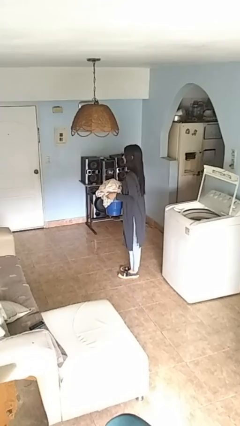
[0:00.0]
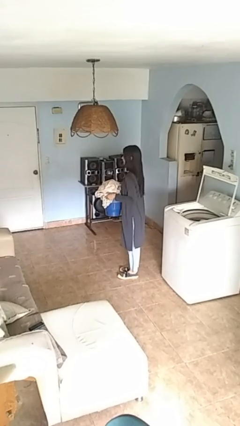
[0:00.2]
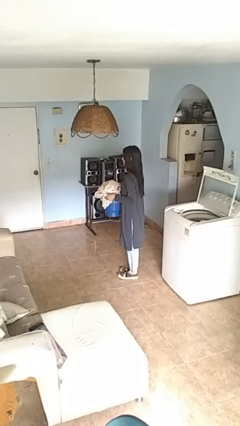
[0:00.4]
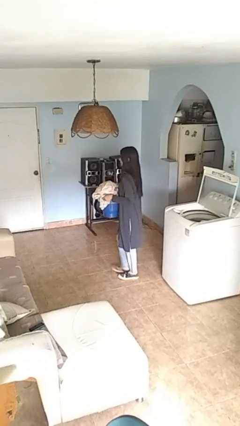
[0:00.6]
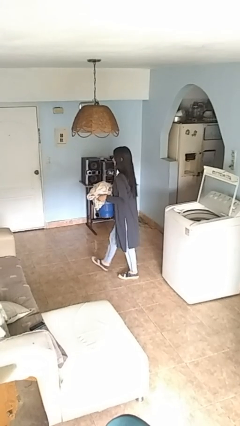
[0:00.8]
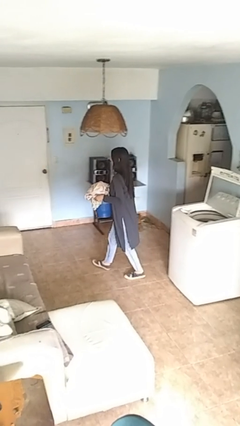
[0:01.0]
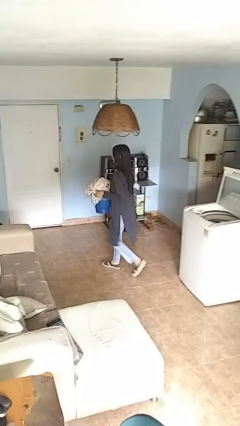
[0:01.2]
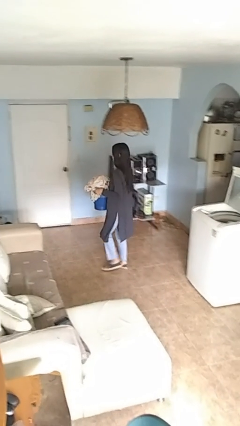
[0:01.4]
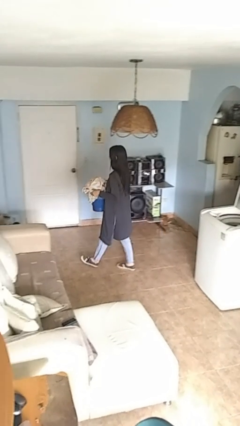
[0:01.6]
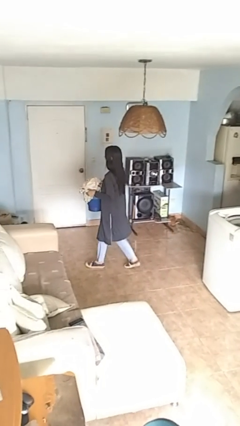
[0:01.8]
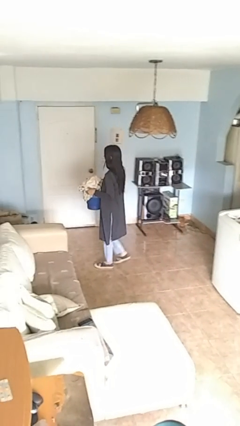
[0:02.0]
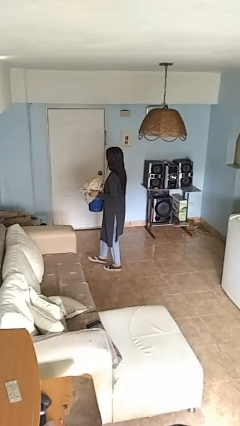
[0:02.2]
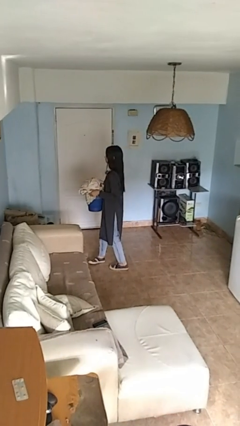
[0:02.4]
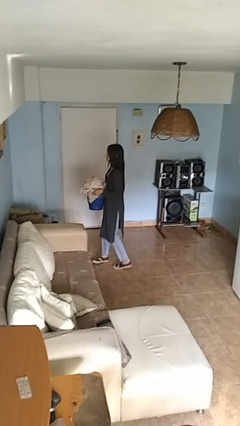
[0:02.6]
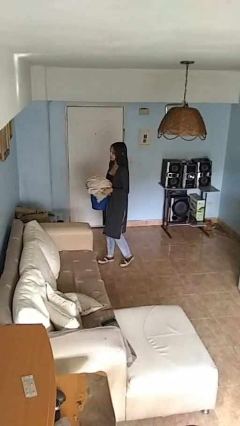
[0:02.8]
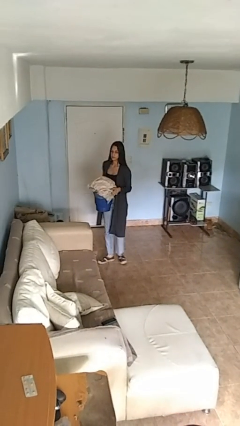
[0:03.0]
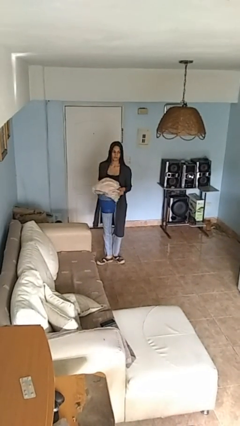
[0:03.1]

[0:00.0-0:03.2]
person carries laundry basket

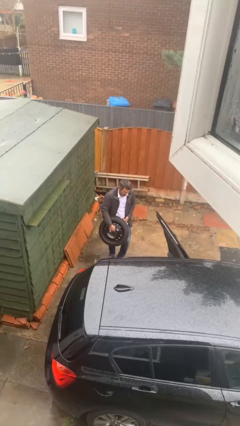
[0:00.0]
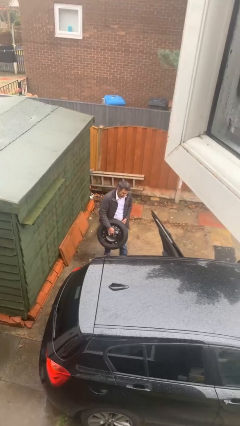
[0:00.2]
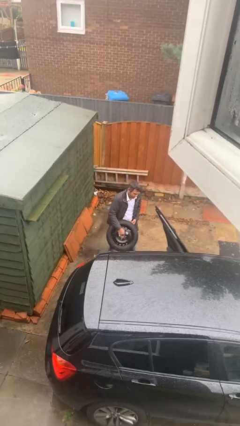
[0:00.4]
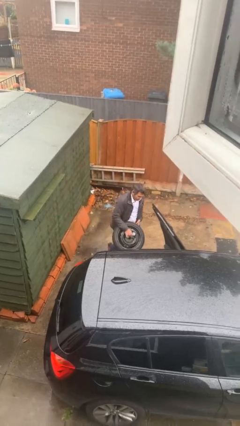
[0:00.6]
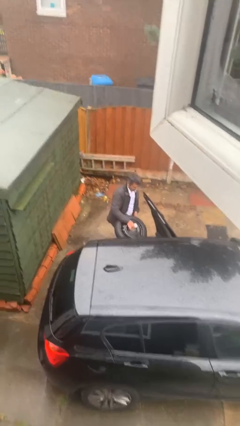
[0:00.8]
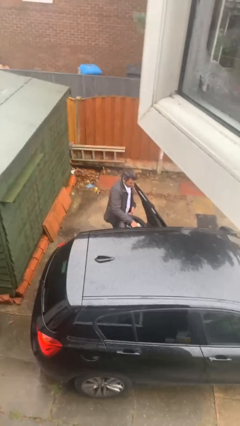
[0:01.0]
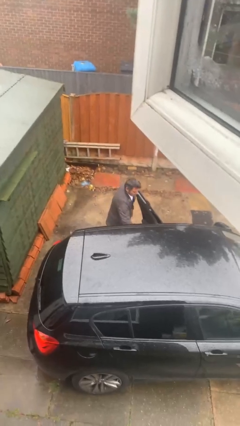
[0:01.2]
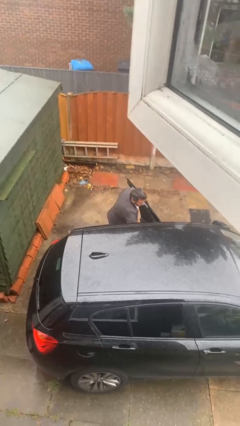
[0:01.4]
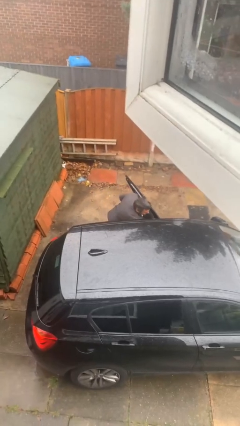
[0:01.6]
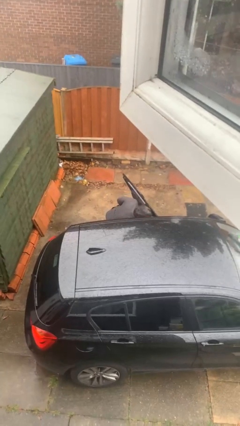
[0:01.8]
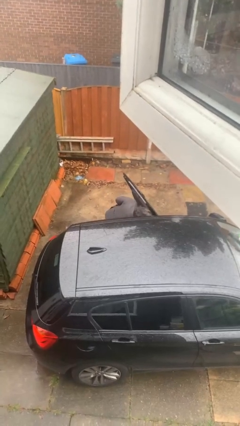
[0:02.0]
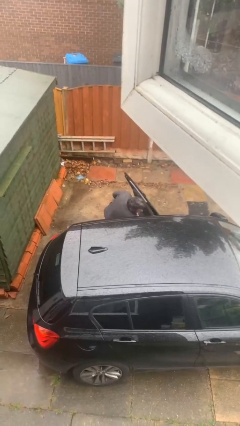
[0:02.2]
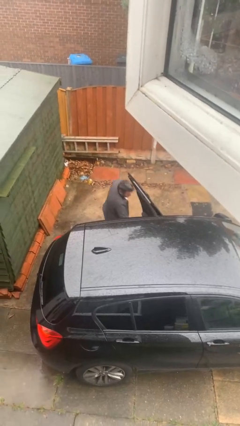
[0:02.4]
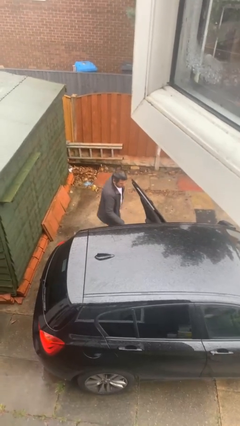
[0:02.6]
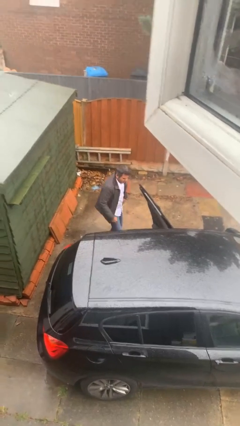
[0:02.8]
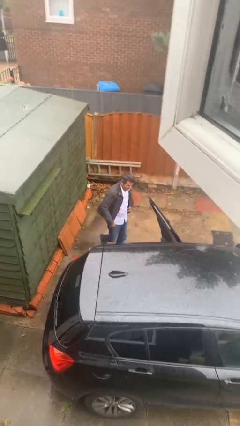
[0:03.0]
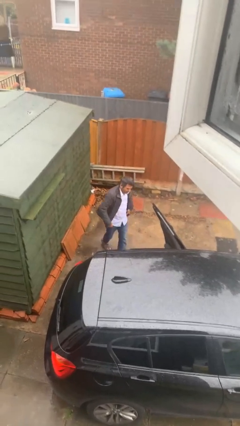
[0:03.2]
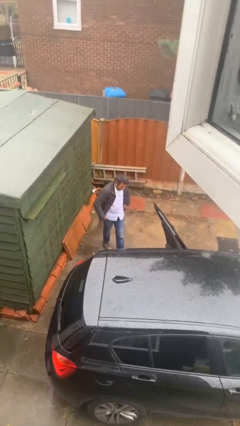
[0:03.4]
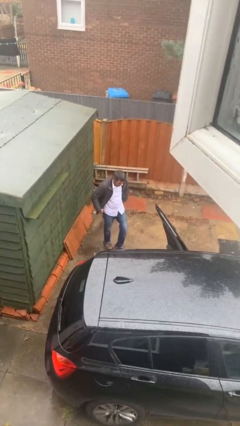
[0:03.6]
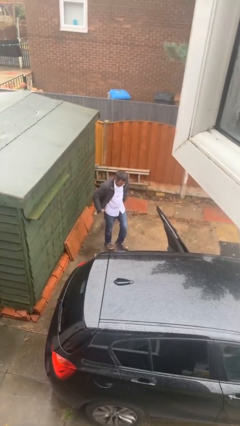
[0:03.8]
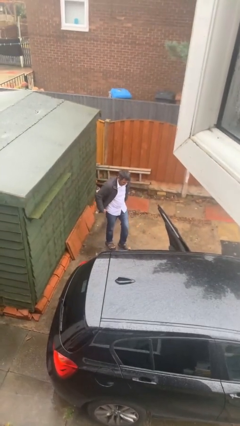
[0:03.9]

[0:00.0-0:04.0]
person loads car

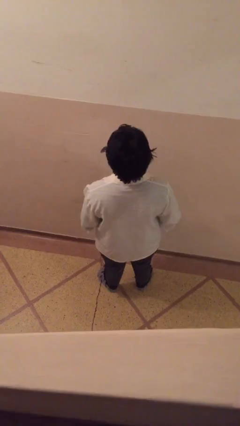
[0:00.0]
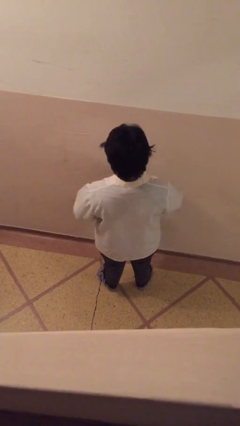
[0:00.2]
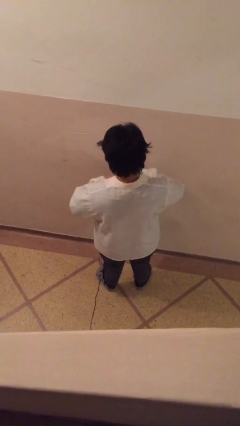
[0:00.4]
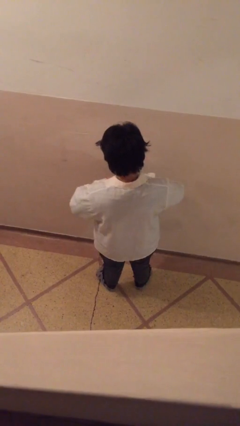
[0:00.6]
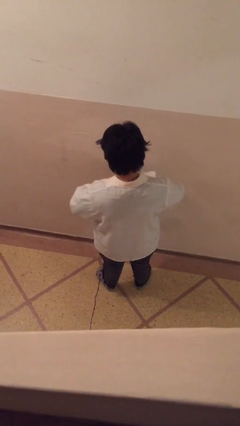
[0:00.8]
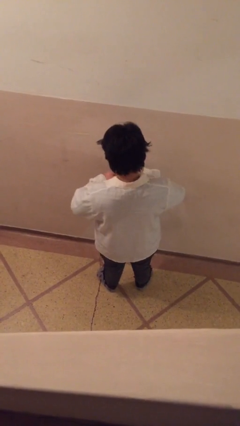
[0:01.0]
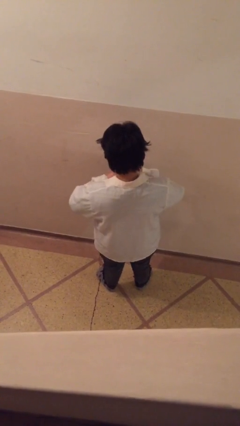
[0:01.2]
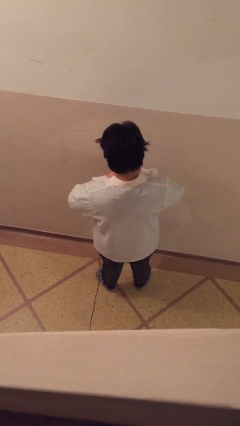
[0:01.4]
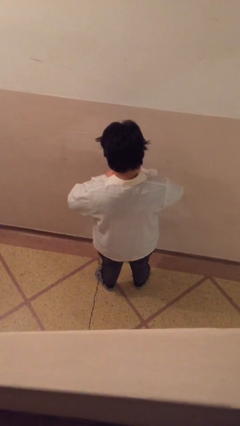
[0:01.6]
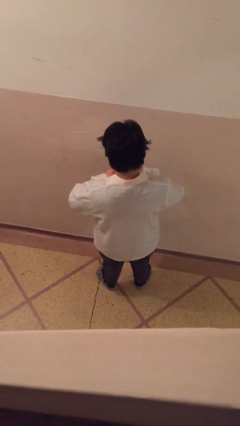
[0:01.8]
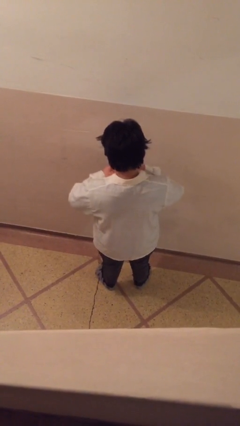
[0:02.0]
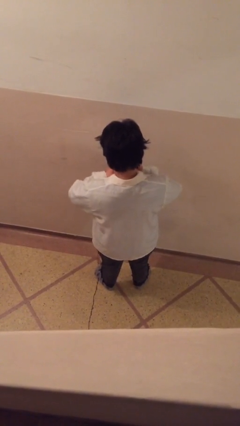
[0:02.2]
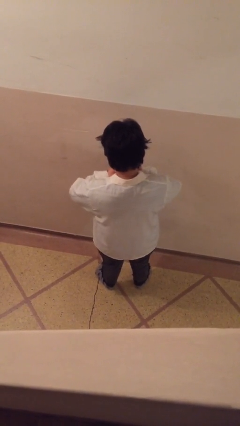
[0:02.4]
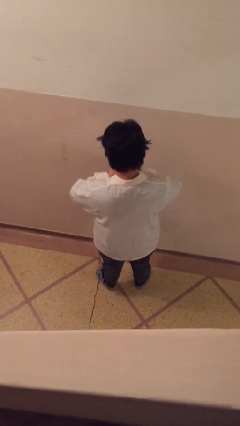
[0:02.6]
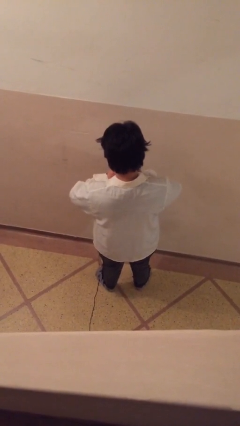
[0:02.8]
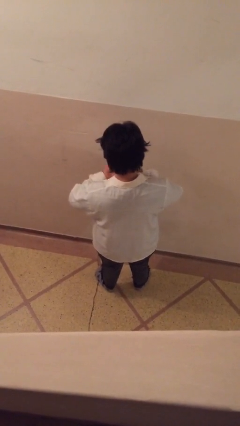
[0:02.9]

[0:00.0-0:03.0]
person buttons shirt

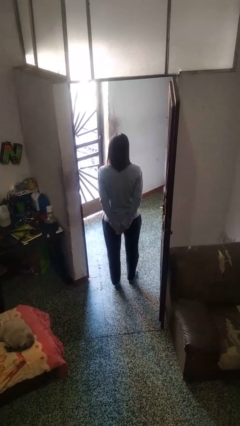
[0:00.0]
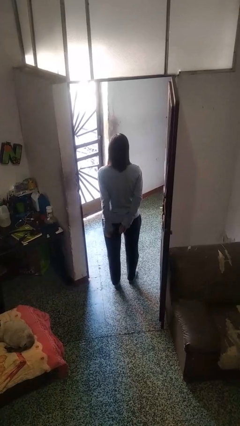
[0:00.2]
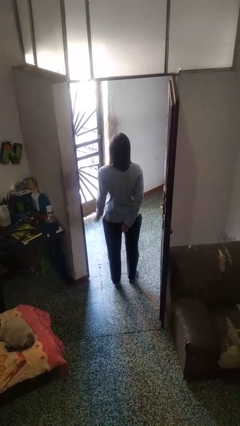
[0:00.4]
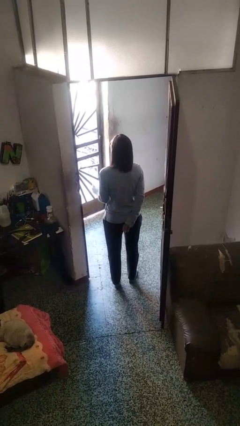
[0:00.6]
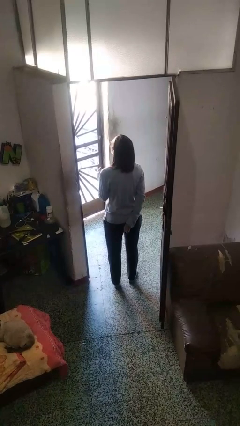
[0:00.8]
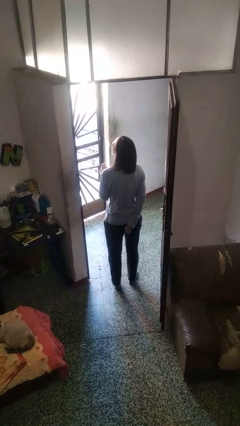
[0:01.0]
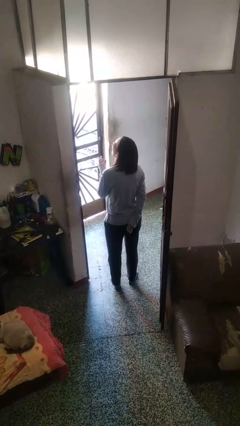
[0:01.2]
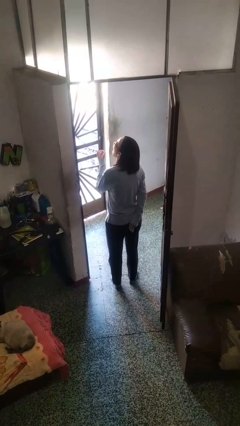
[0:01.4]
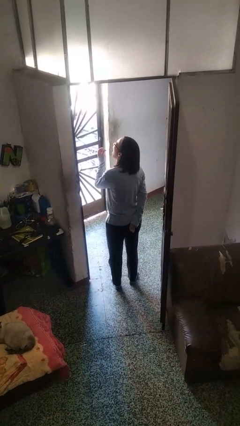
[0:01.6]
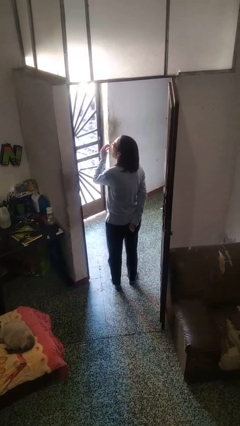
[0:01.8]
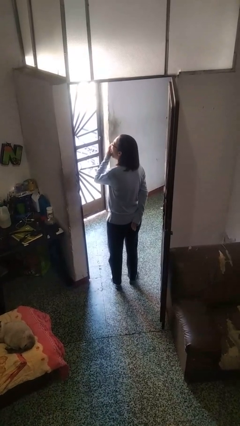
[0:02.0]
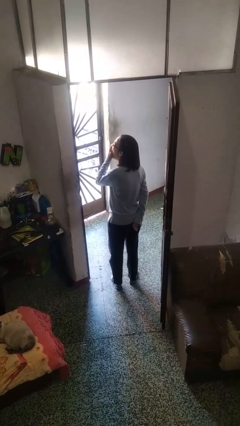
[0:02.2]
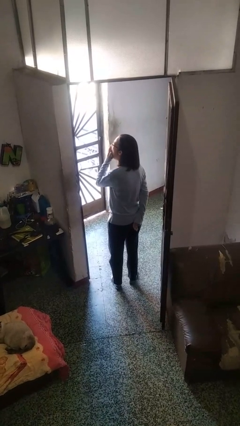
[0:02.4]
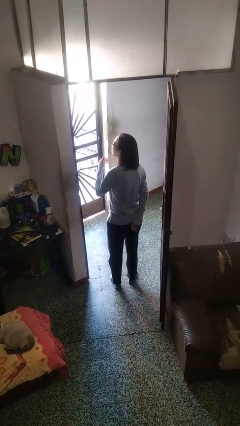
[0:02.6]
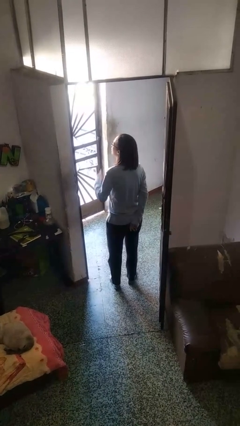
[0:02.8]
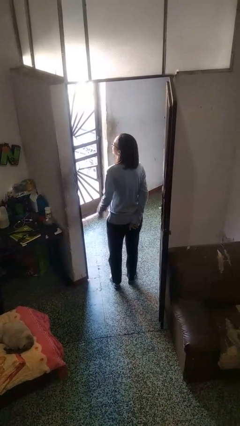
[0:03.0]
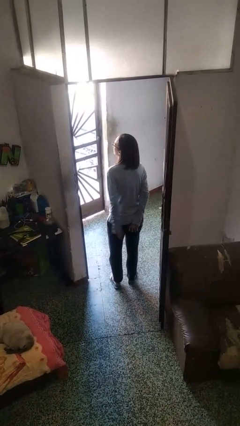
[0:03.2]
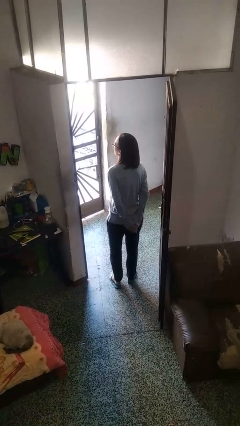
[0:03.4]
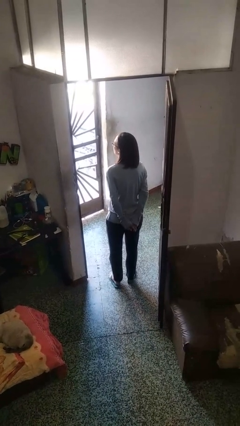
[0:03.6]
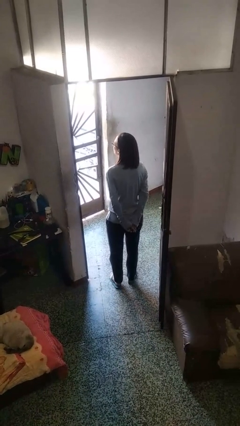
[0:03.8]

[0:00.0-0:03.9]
person yawns

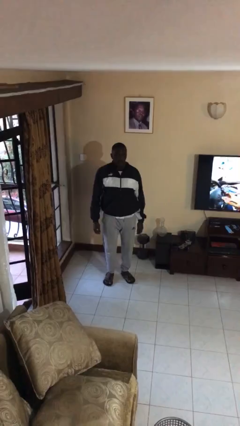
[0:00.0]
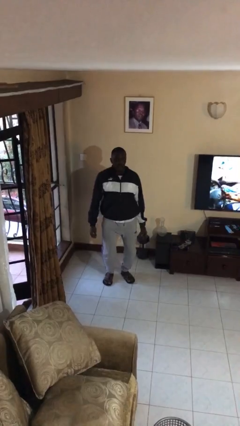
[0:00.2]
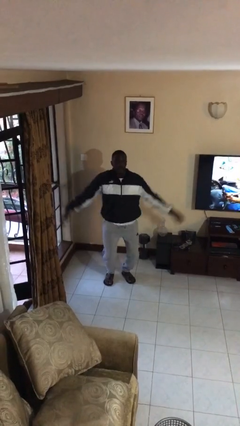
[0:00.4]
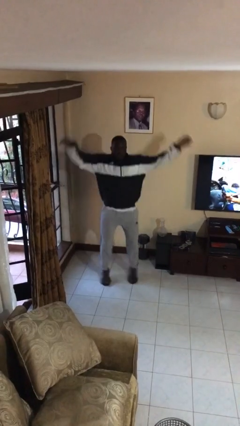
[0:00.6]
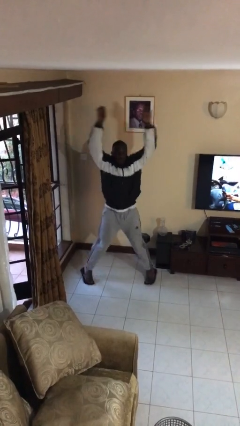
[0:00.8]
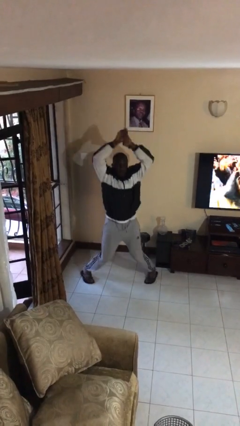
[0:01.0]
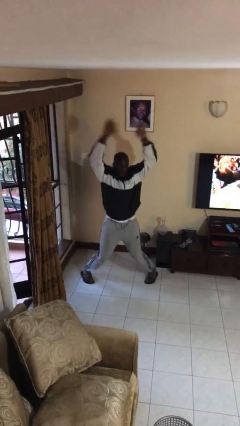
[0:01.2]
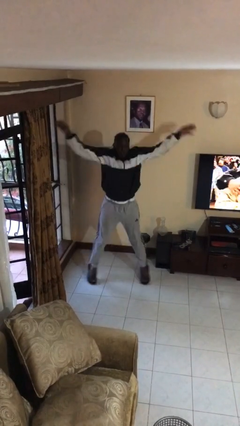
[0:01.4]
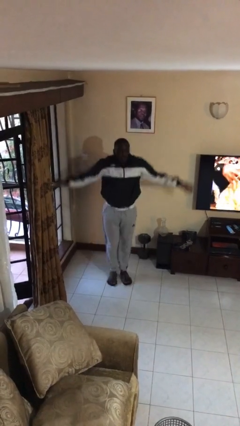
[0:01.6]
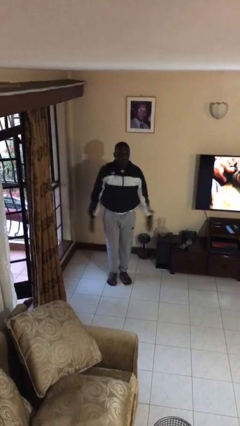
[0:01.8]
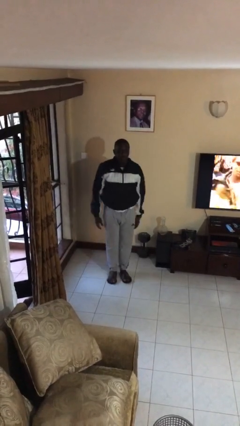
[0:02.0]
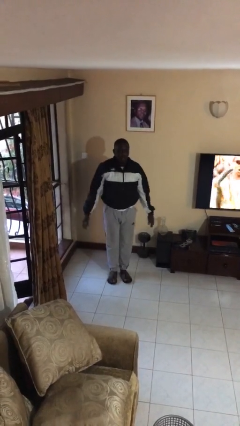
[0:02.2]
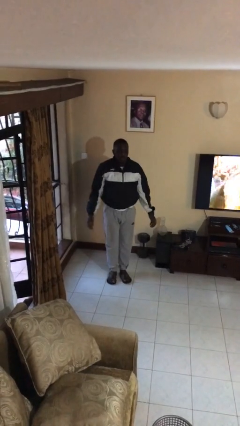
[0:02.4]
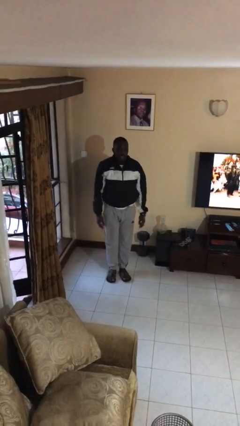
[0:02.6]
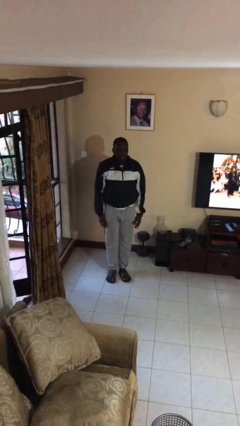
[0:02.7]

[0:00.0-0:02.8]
person exercises with jumping jacks

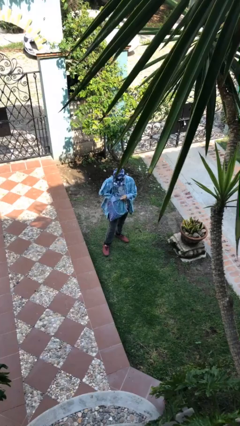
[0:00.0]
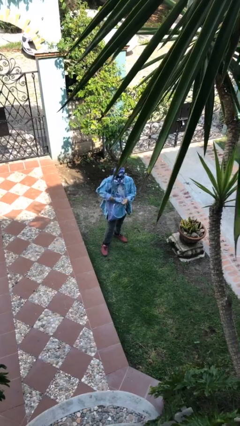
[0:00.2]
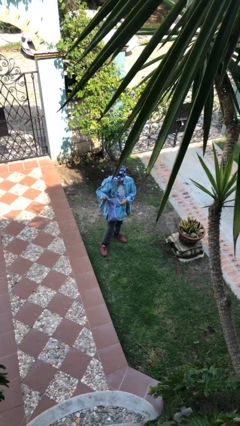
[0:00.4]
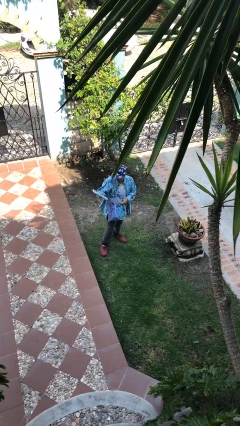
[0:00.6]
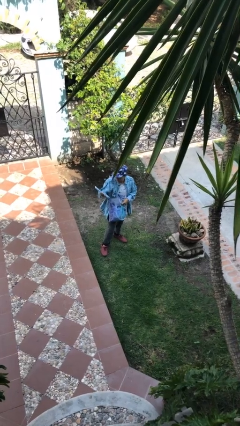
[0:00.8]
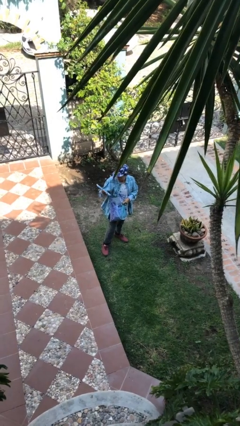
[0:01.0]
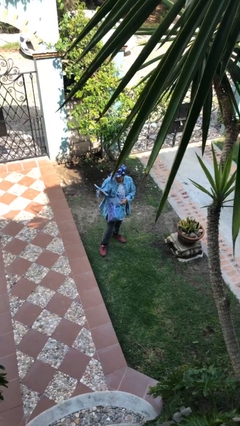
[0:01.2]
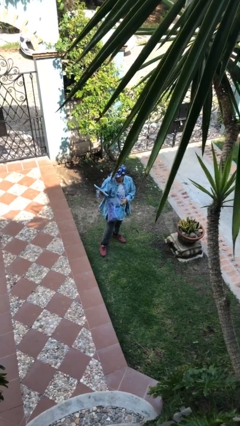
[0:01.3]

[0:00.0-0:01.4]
person takes object from purse
